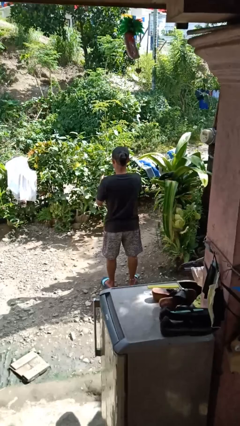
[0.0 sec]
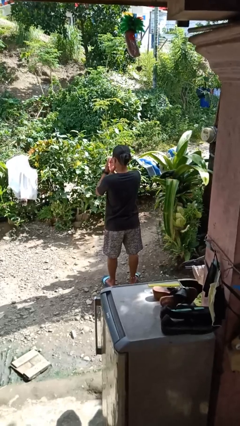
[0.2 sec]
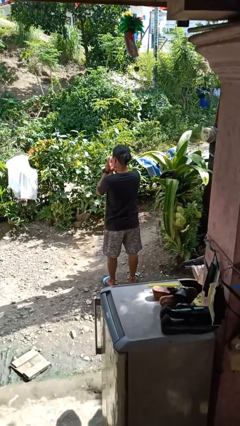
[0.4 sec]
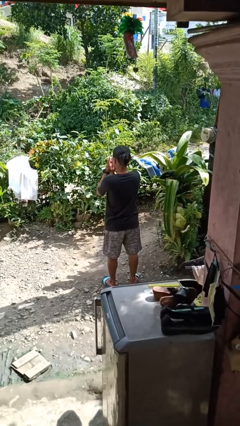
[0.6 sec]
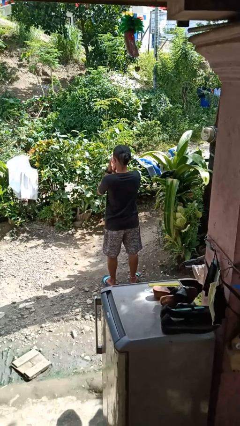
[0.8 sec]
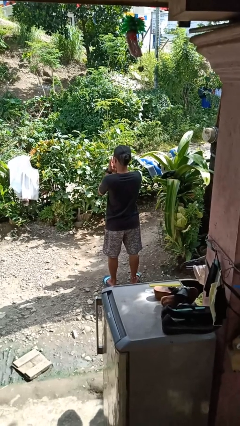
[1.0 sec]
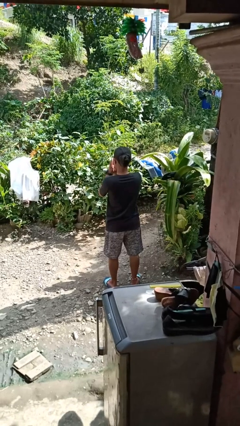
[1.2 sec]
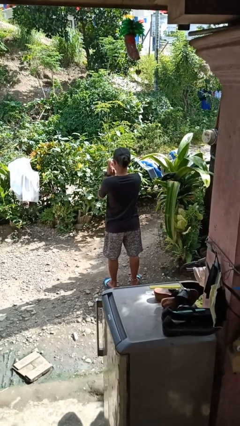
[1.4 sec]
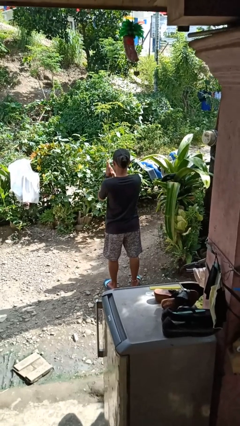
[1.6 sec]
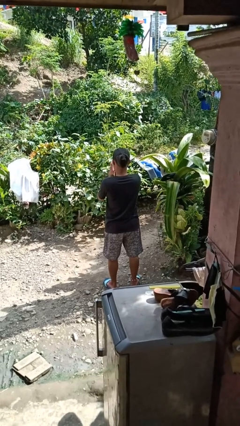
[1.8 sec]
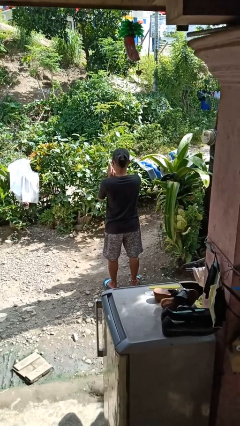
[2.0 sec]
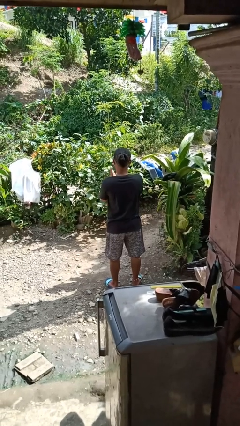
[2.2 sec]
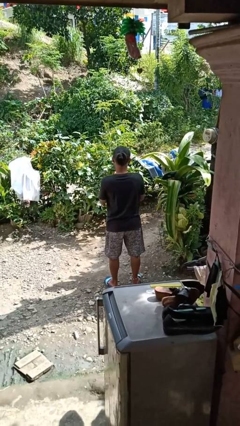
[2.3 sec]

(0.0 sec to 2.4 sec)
person blows into hands

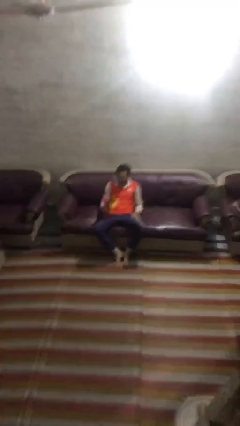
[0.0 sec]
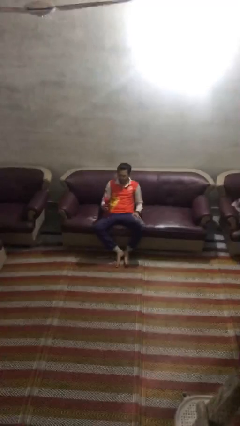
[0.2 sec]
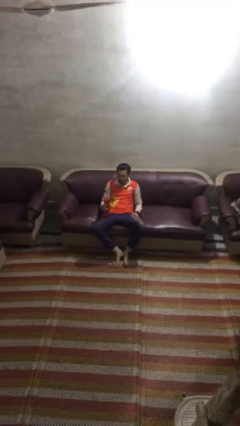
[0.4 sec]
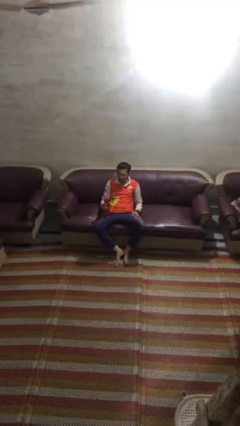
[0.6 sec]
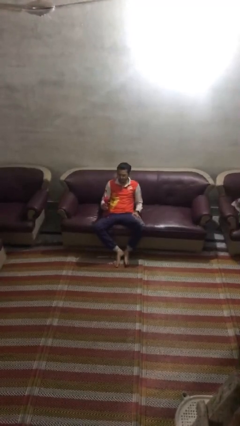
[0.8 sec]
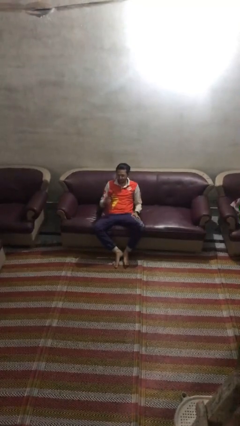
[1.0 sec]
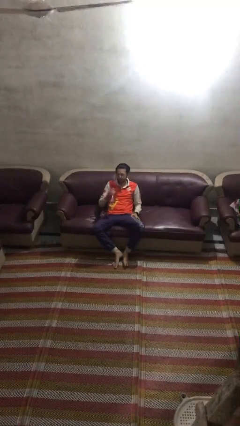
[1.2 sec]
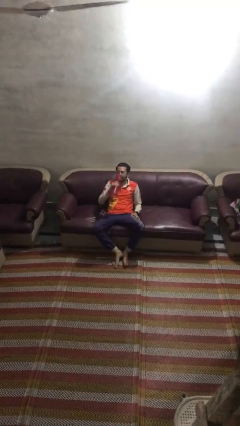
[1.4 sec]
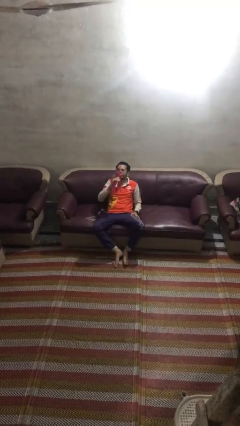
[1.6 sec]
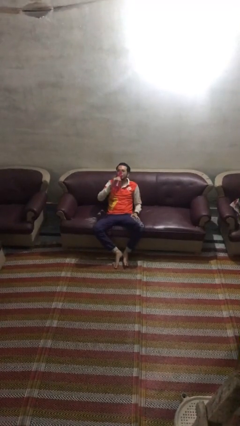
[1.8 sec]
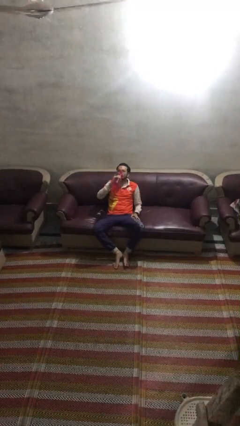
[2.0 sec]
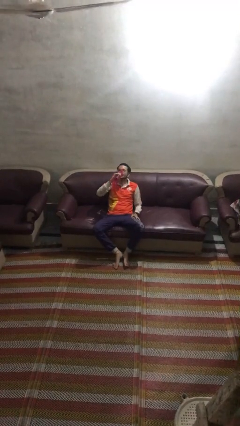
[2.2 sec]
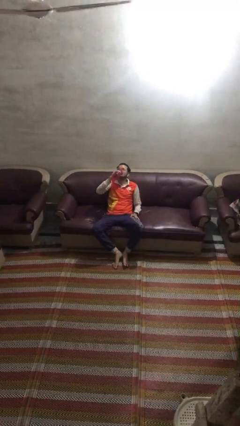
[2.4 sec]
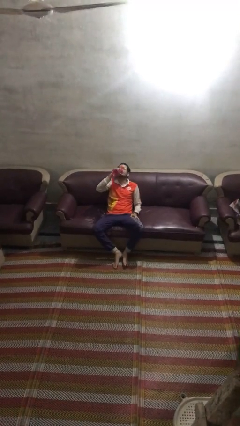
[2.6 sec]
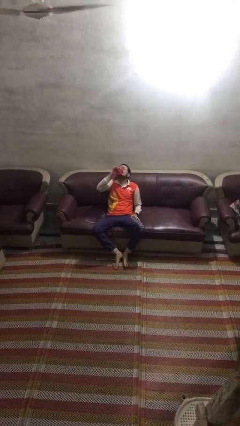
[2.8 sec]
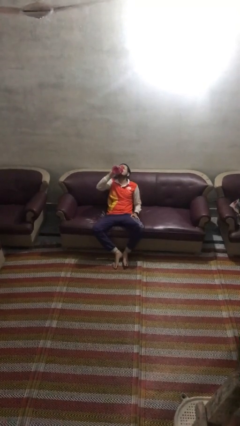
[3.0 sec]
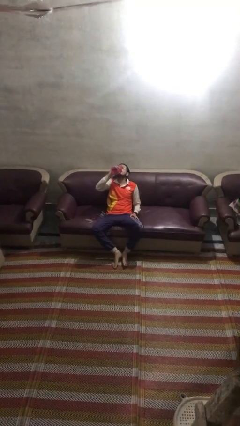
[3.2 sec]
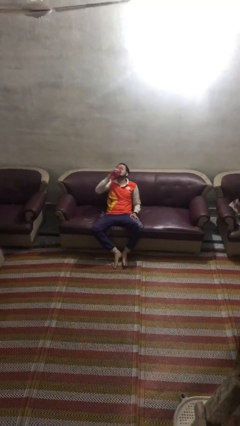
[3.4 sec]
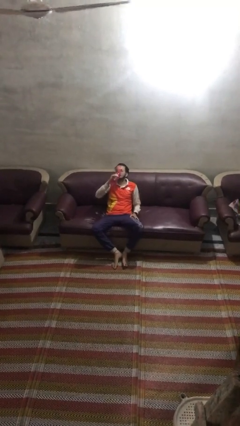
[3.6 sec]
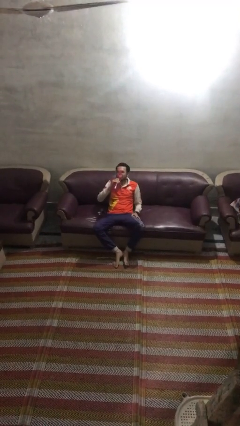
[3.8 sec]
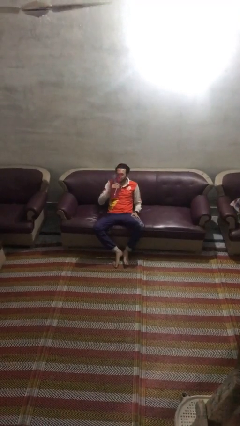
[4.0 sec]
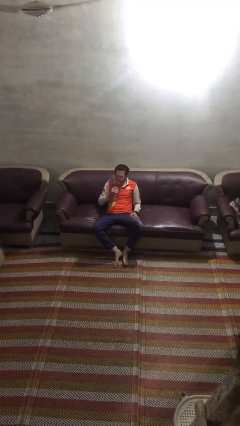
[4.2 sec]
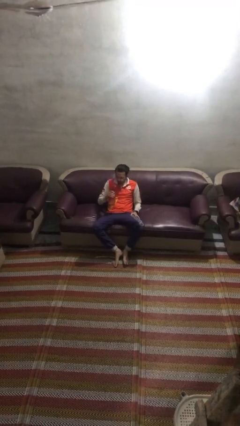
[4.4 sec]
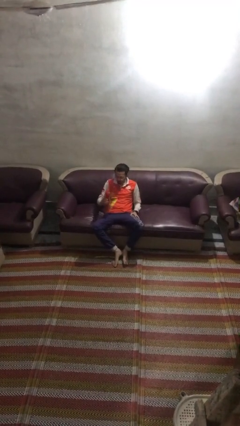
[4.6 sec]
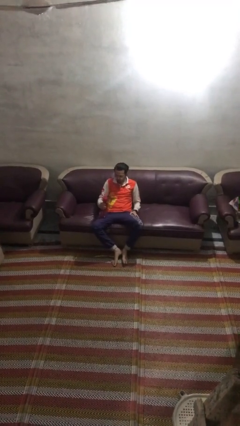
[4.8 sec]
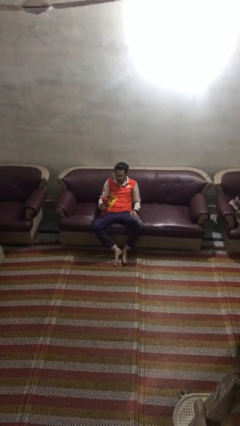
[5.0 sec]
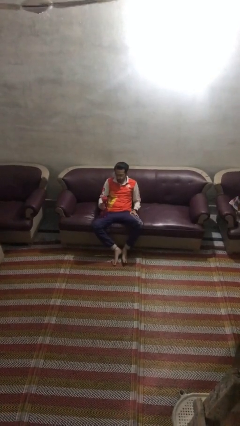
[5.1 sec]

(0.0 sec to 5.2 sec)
person drinks from bottle

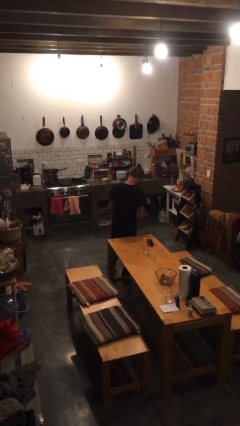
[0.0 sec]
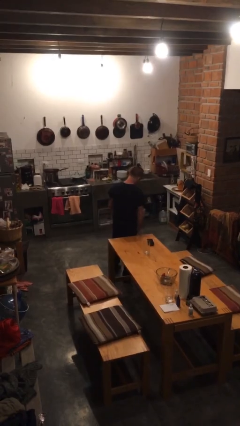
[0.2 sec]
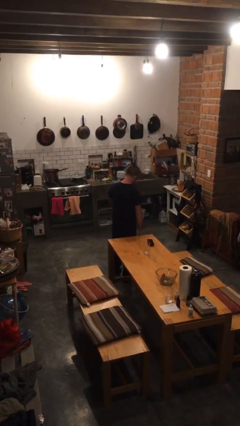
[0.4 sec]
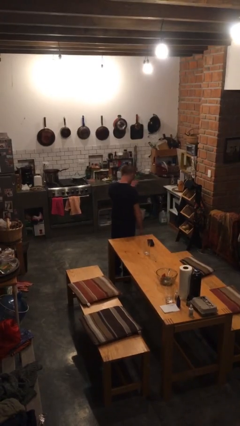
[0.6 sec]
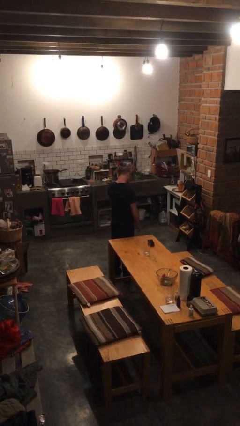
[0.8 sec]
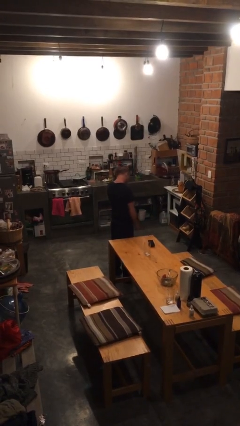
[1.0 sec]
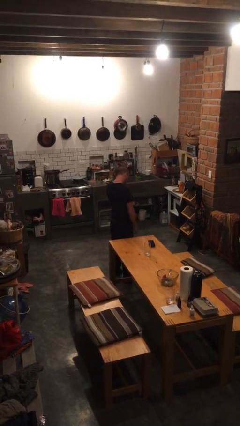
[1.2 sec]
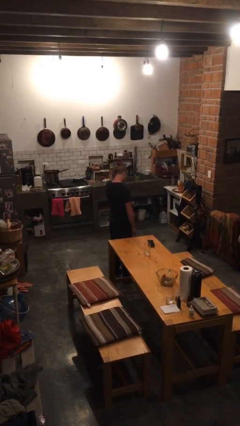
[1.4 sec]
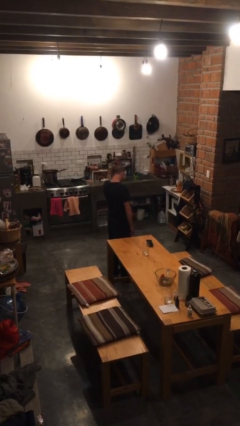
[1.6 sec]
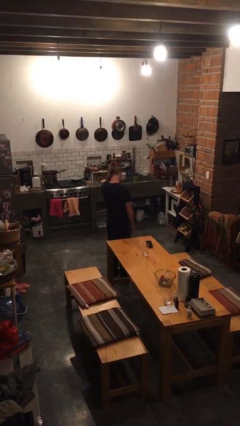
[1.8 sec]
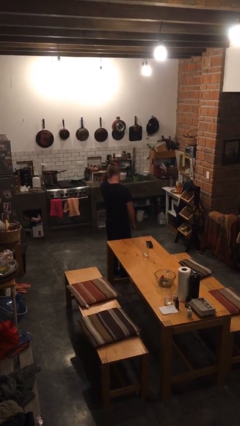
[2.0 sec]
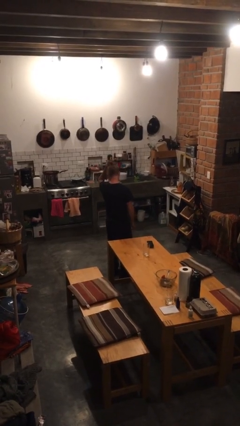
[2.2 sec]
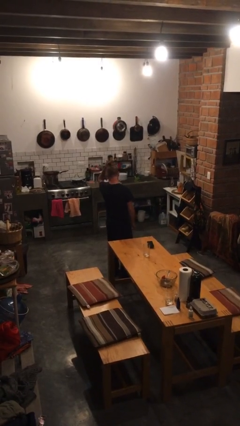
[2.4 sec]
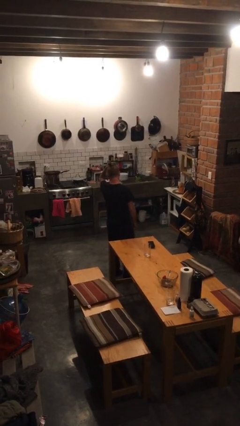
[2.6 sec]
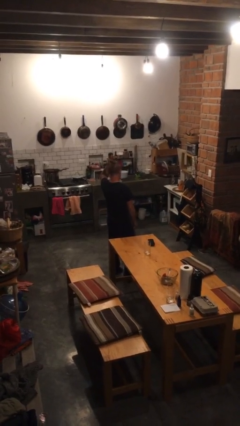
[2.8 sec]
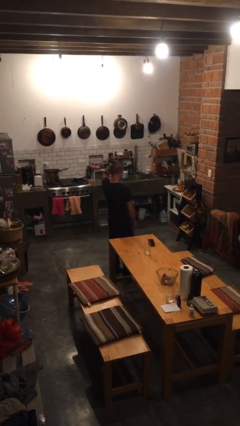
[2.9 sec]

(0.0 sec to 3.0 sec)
person pats head

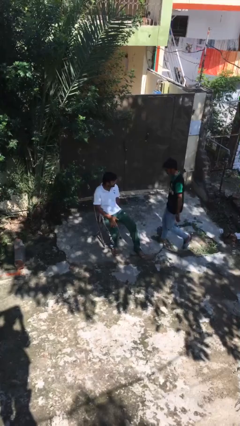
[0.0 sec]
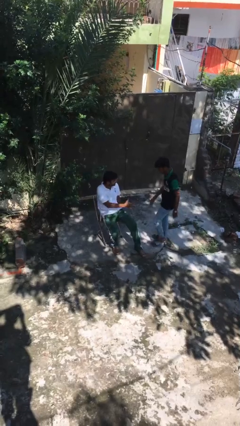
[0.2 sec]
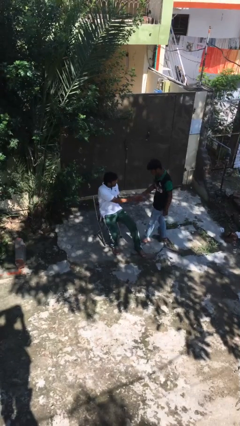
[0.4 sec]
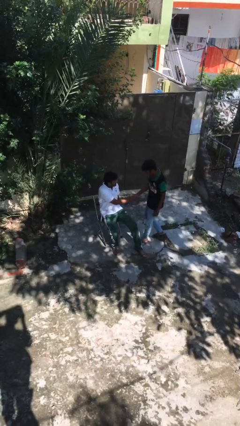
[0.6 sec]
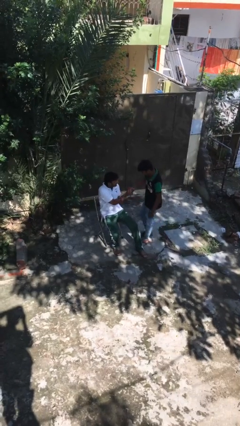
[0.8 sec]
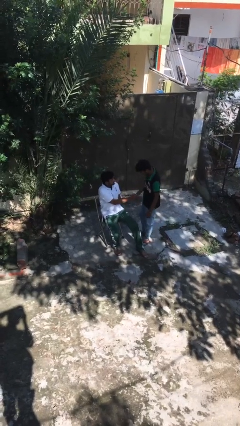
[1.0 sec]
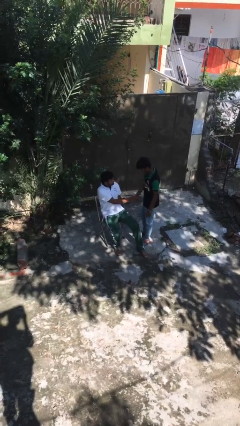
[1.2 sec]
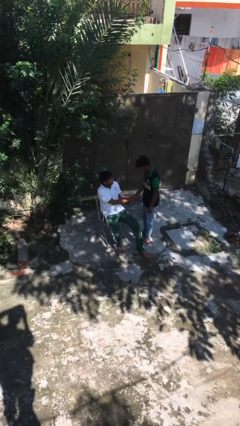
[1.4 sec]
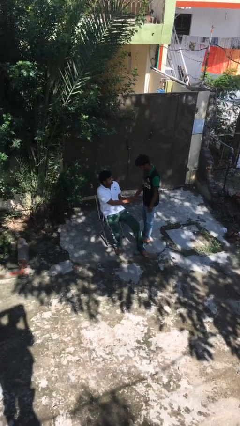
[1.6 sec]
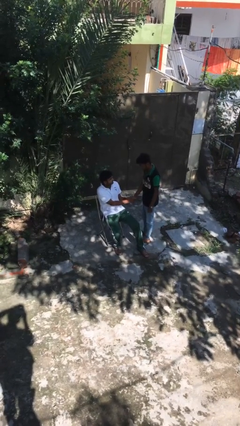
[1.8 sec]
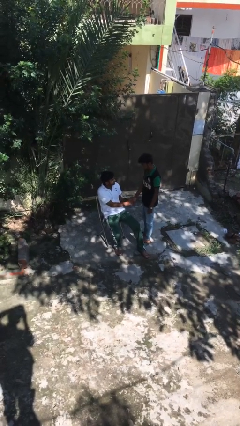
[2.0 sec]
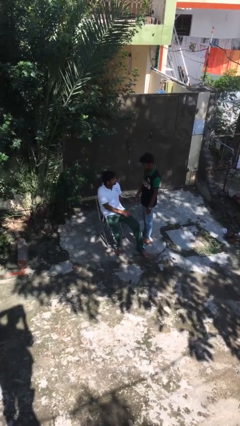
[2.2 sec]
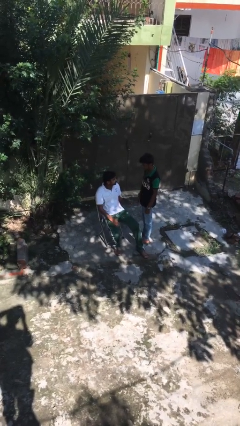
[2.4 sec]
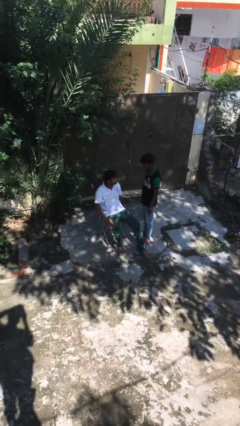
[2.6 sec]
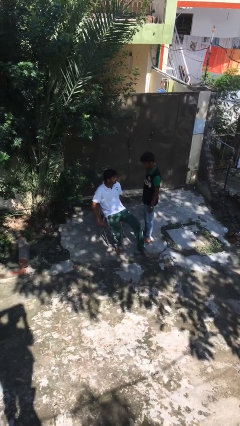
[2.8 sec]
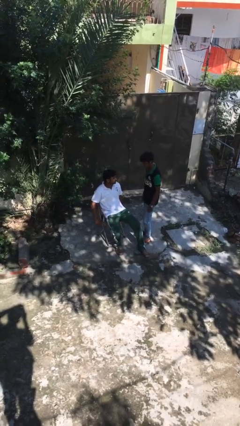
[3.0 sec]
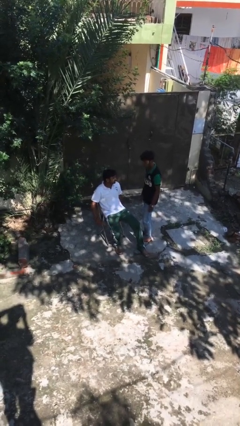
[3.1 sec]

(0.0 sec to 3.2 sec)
person shakes hand

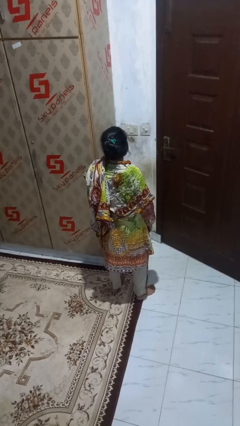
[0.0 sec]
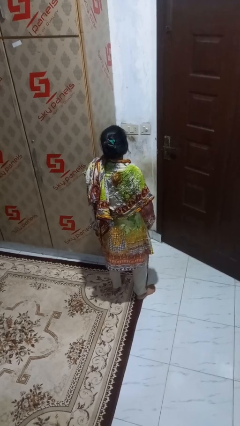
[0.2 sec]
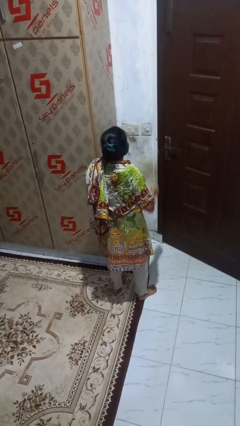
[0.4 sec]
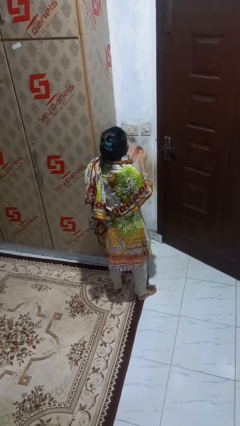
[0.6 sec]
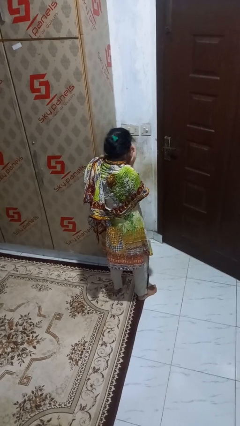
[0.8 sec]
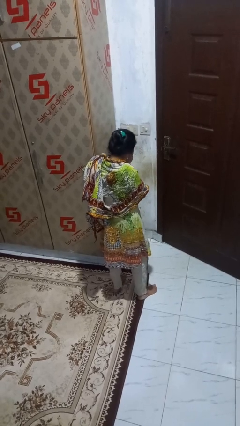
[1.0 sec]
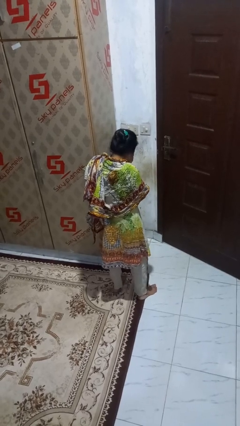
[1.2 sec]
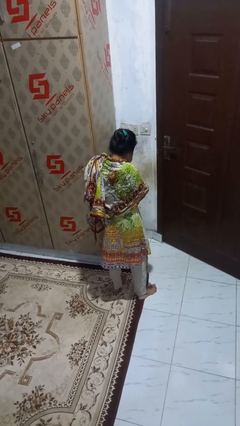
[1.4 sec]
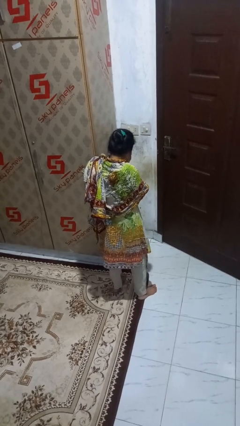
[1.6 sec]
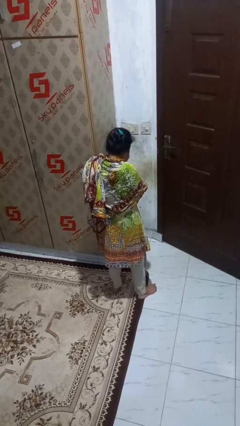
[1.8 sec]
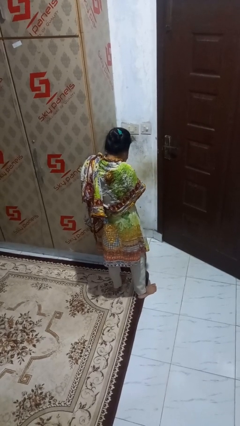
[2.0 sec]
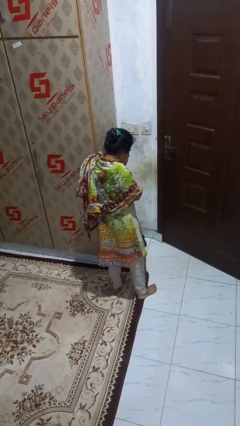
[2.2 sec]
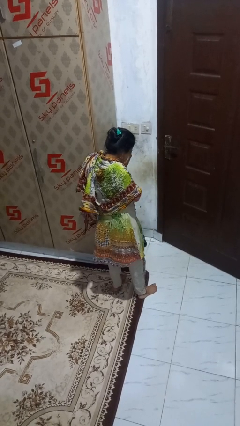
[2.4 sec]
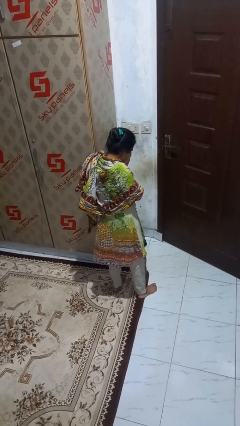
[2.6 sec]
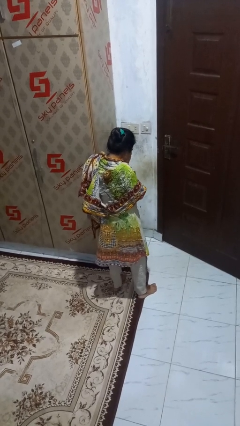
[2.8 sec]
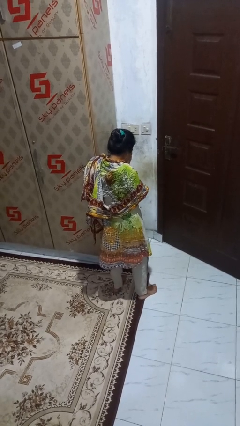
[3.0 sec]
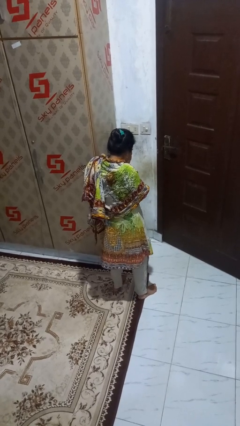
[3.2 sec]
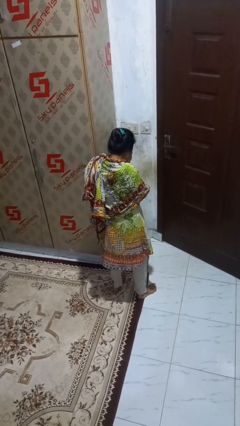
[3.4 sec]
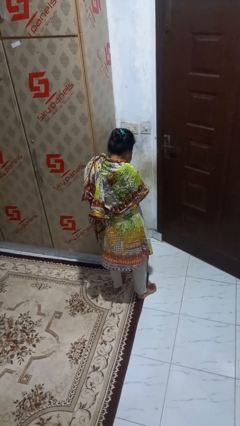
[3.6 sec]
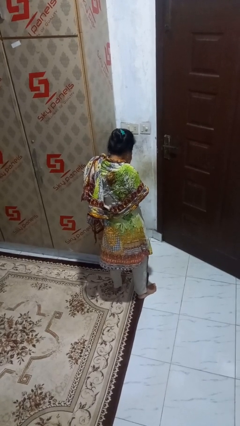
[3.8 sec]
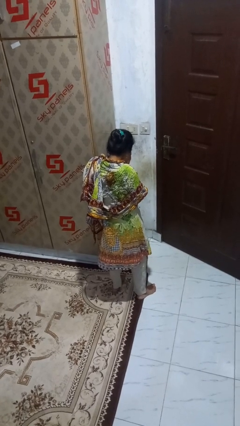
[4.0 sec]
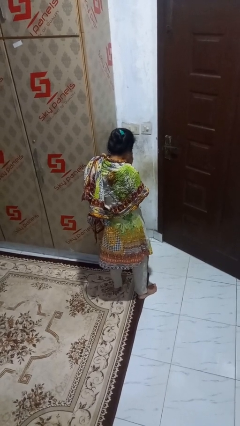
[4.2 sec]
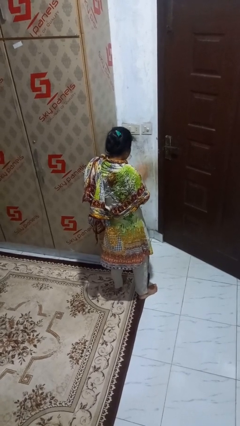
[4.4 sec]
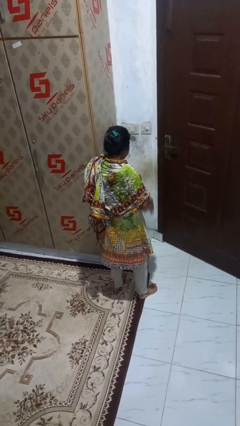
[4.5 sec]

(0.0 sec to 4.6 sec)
person sneezes into hand
